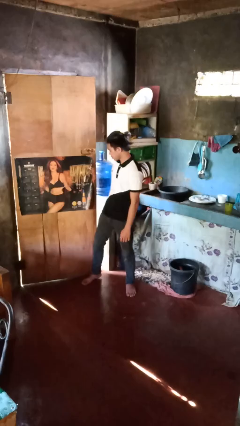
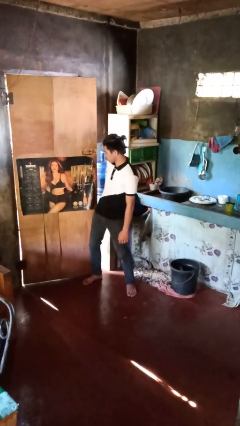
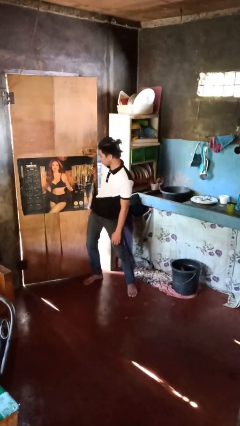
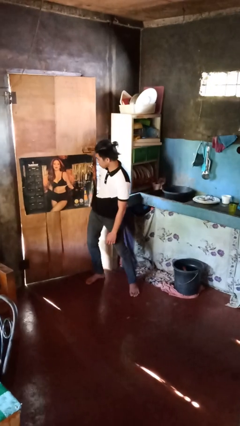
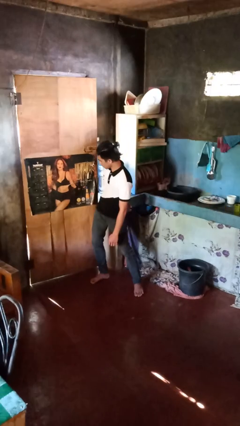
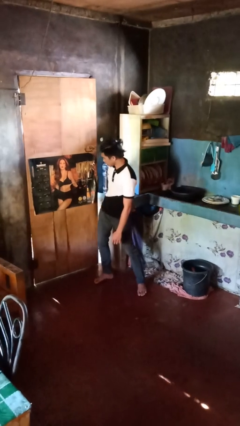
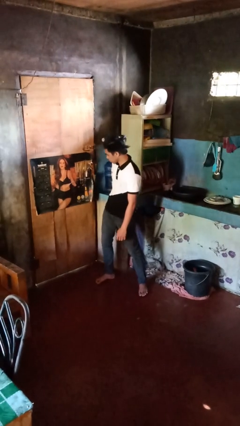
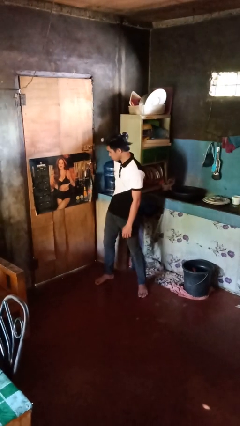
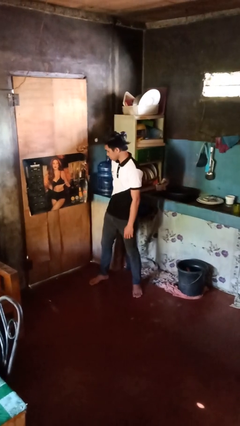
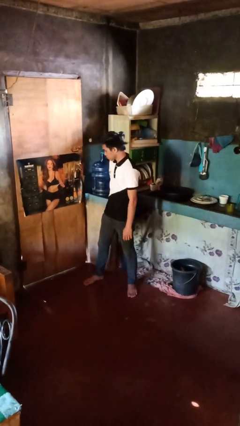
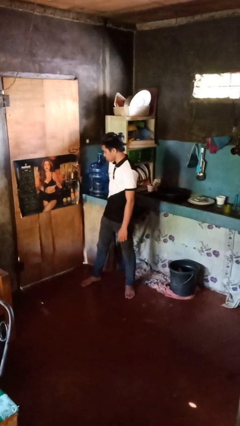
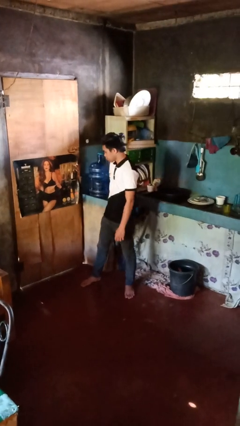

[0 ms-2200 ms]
person closes door with hip

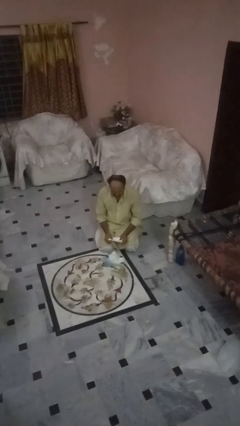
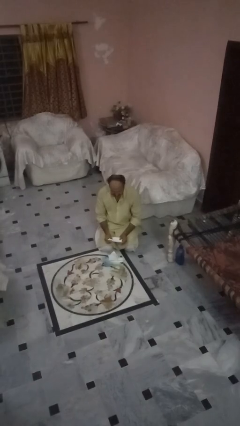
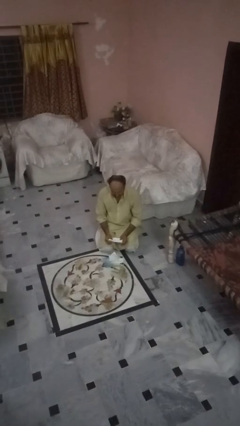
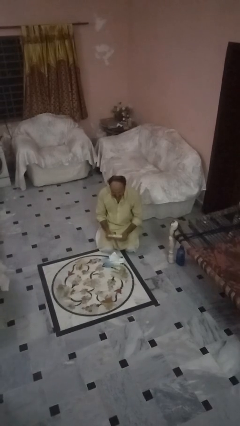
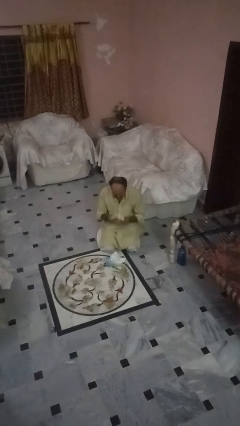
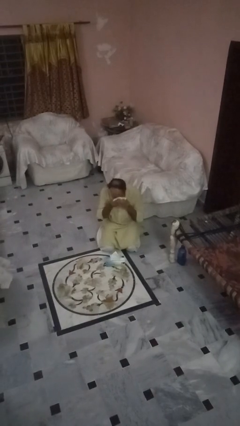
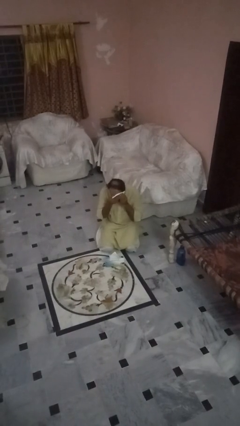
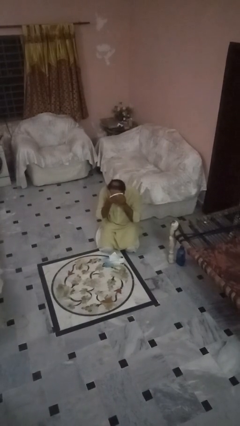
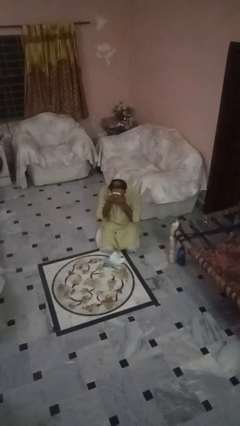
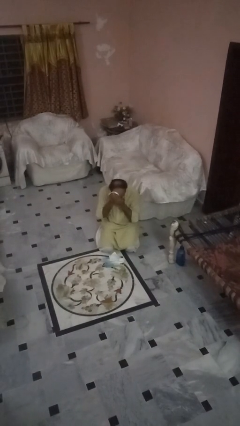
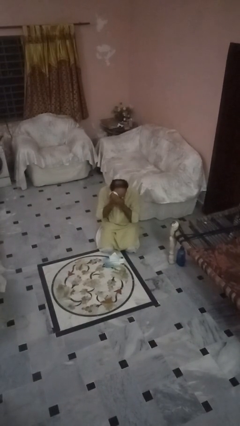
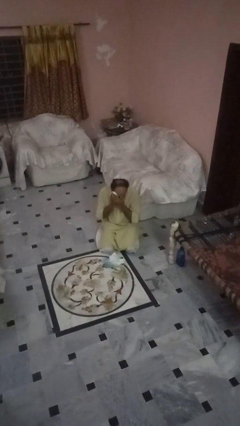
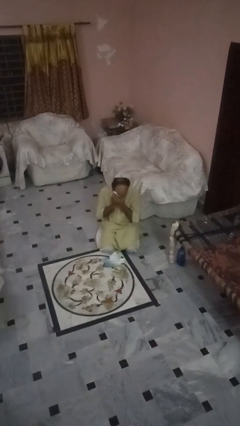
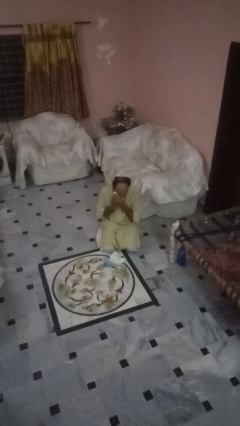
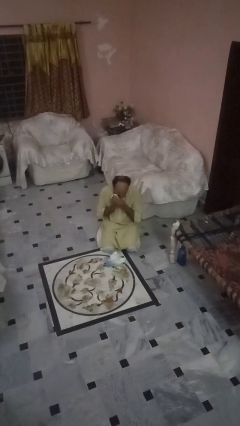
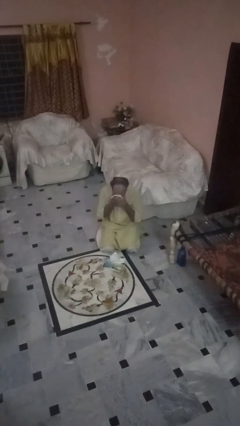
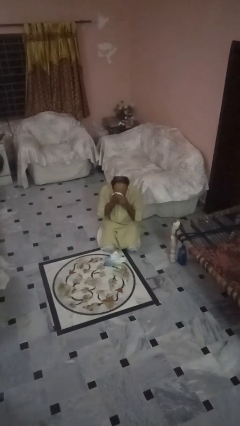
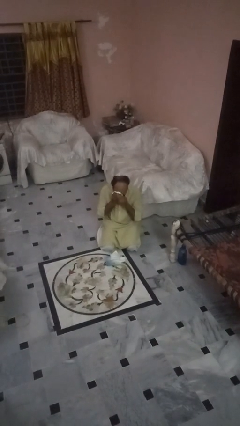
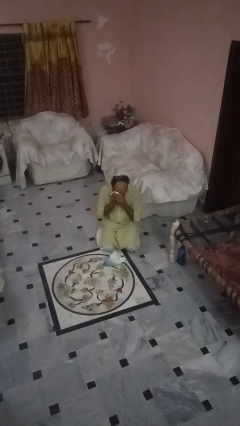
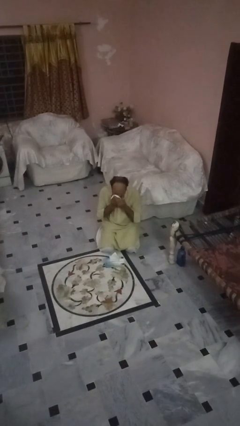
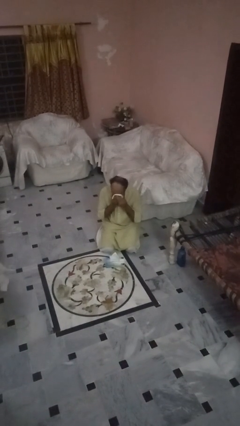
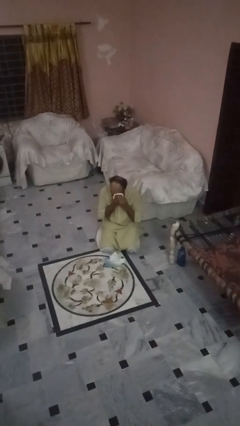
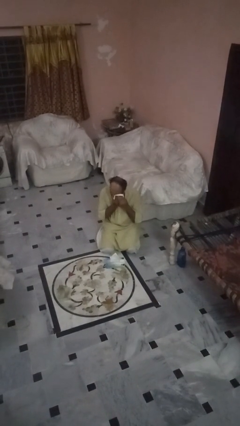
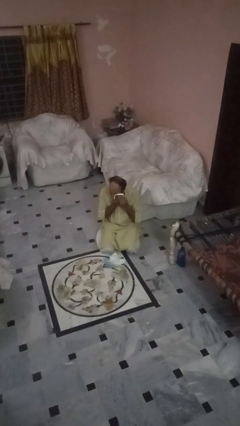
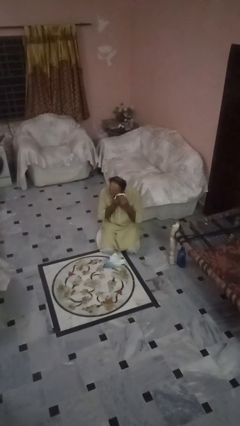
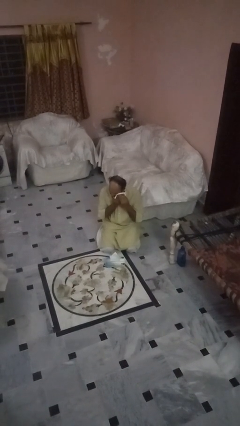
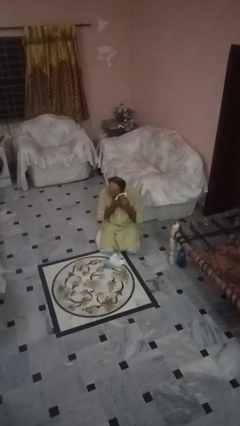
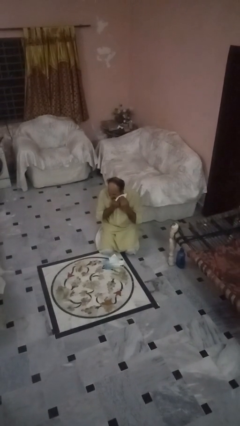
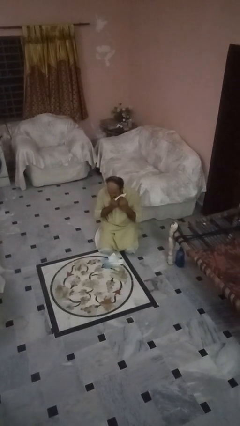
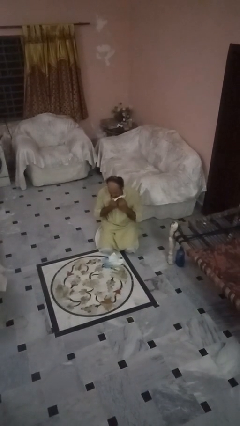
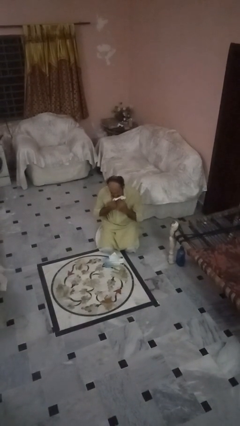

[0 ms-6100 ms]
person wipes mouth with napkin

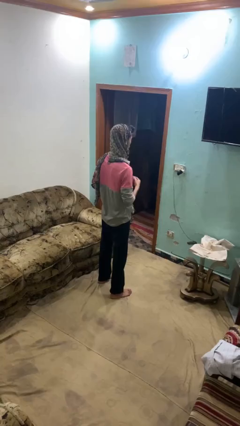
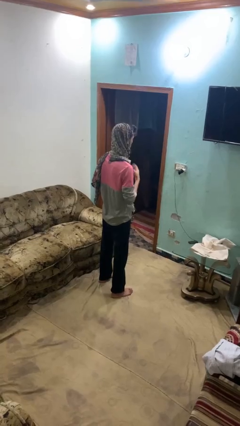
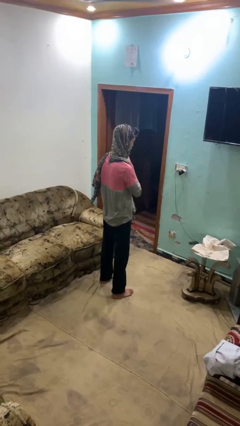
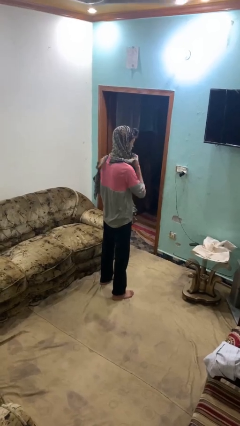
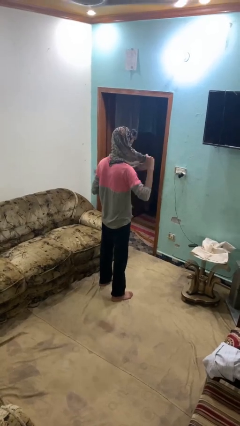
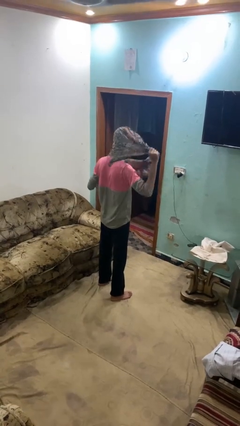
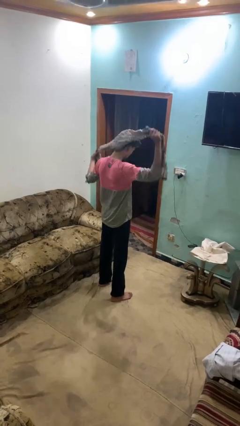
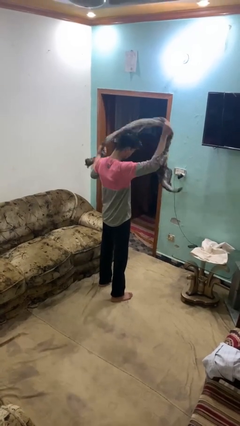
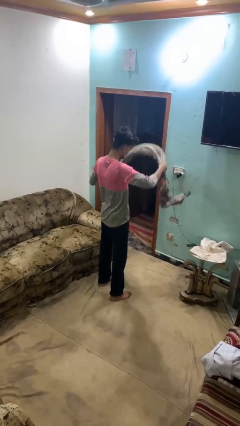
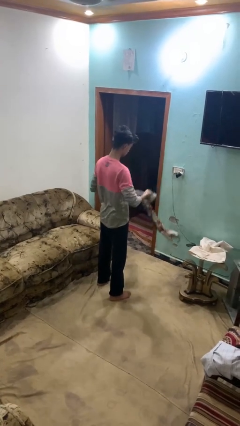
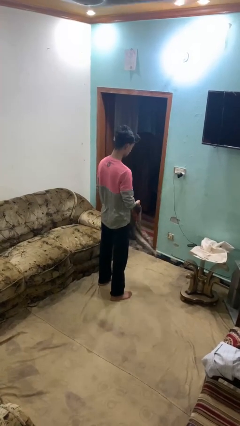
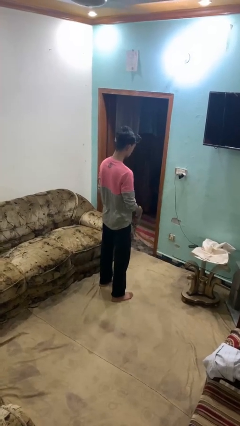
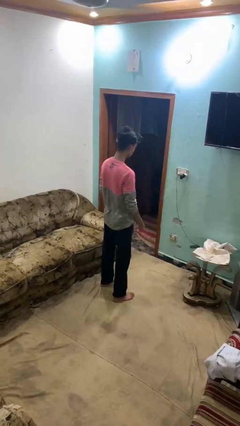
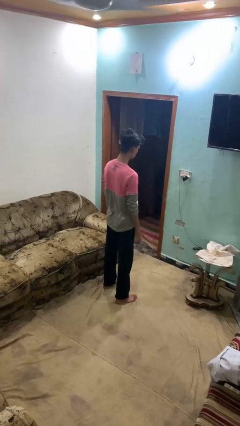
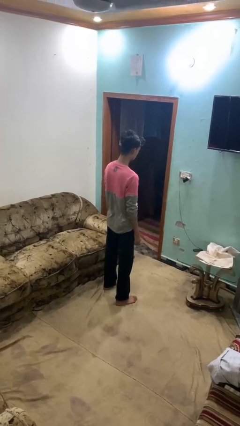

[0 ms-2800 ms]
person takes off scarf

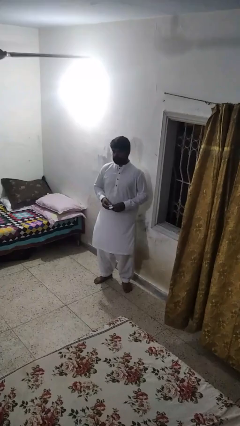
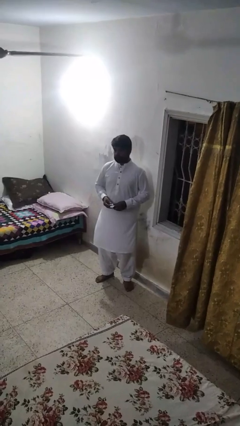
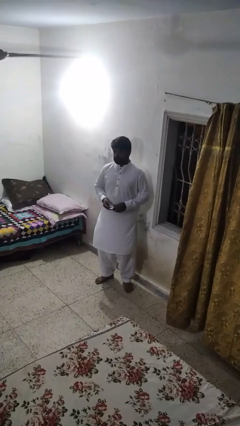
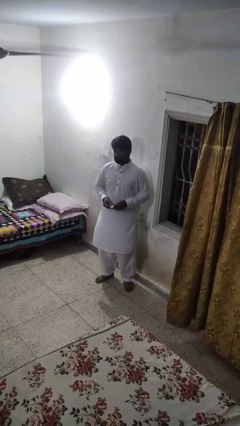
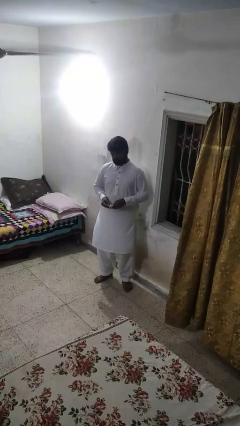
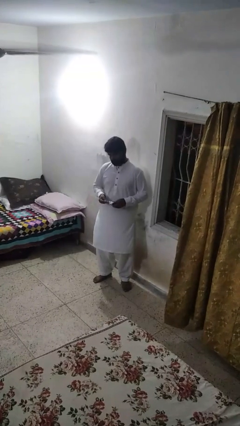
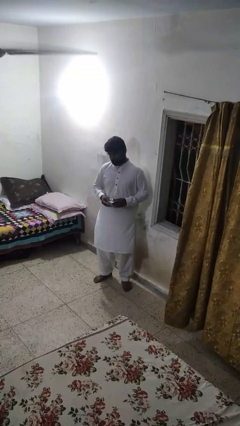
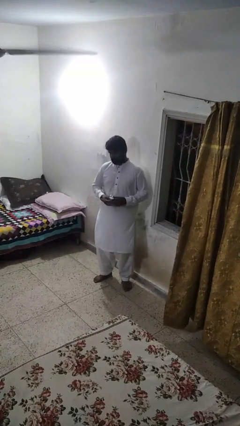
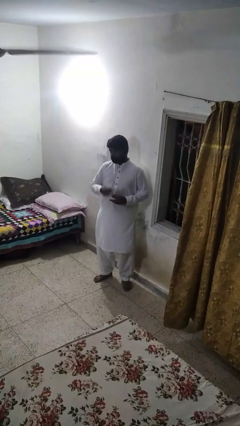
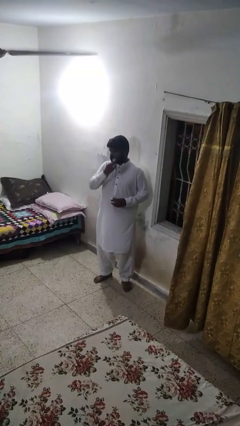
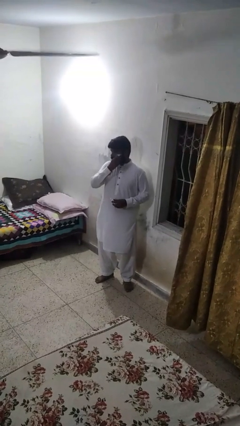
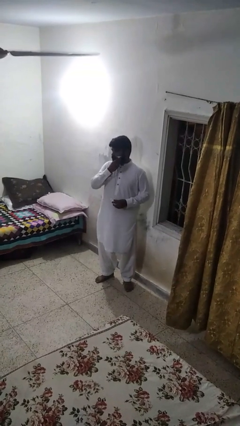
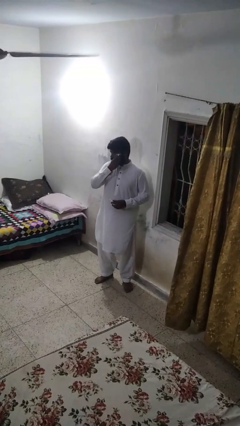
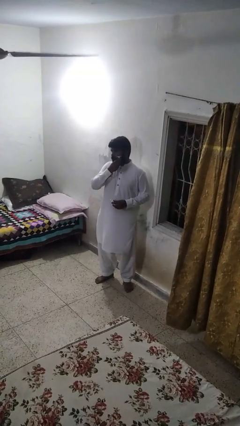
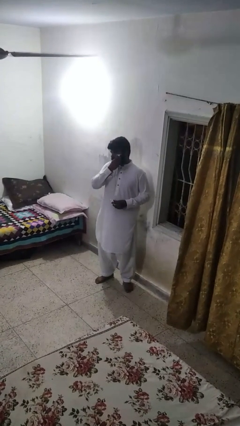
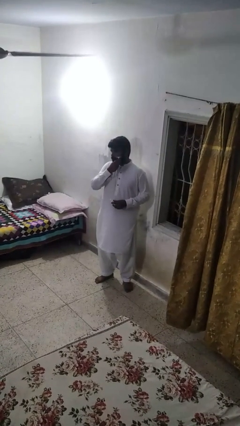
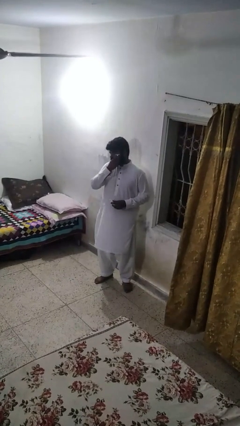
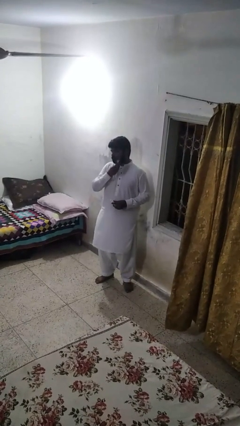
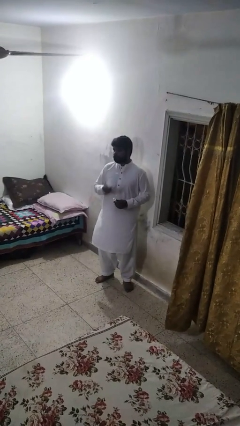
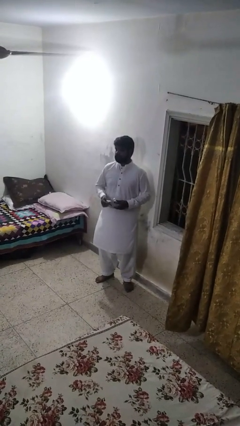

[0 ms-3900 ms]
person shaves face

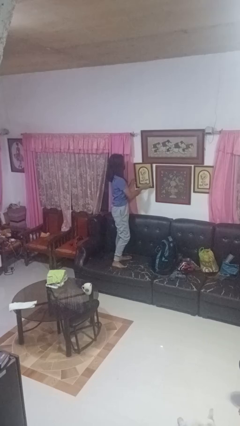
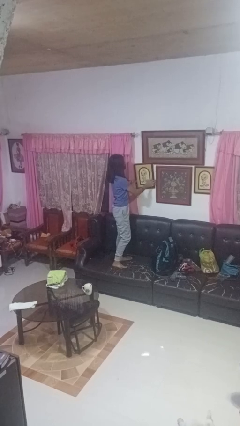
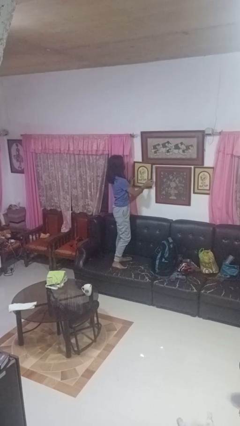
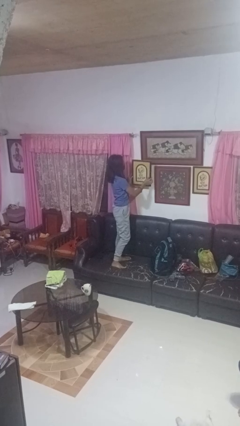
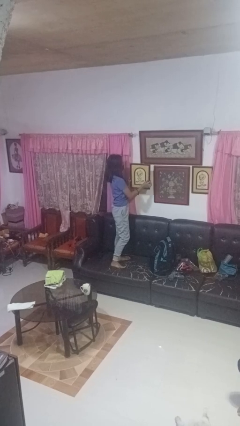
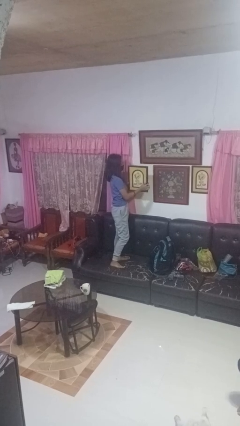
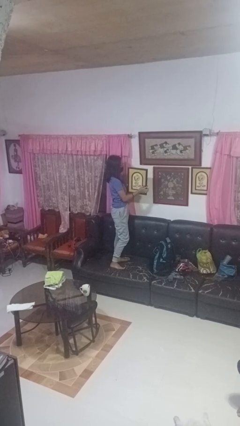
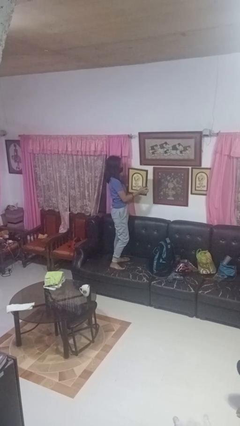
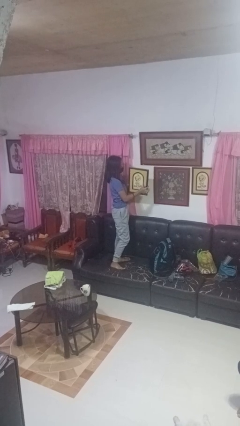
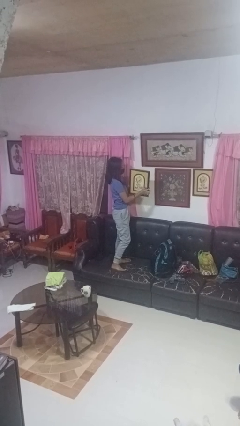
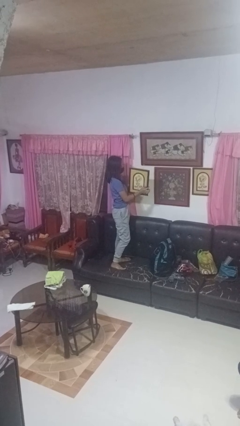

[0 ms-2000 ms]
person takes down picture frame

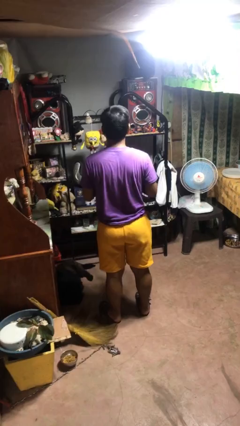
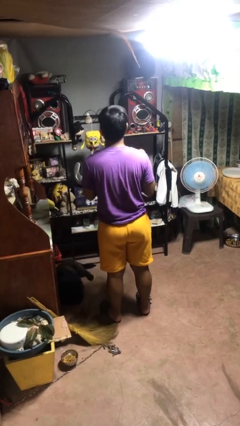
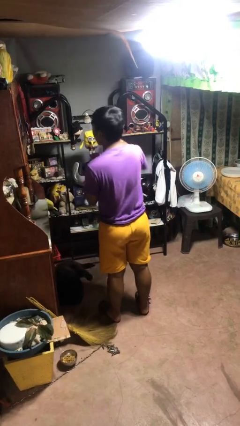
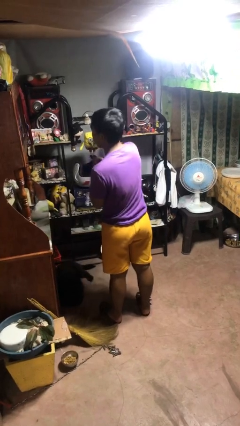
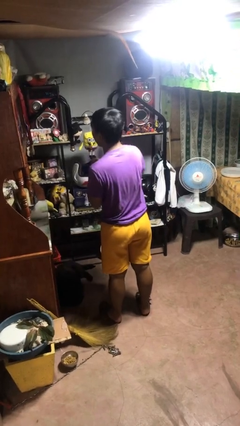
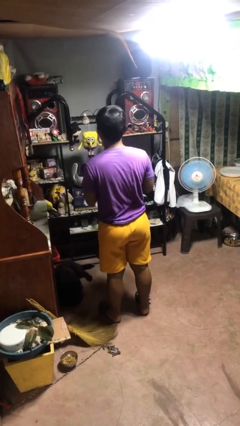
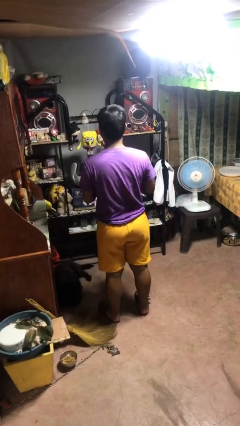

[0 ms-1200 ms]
person punches
